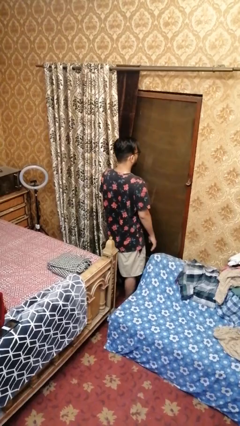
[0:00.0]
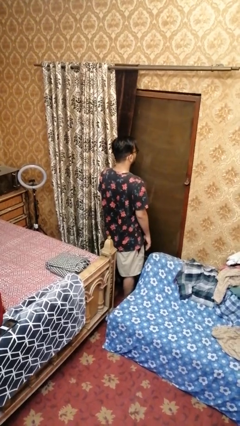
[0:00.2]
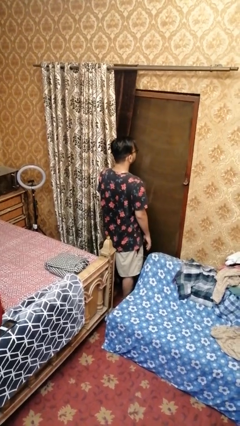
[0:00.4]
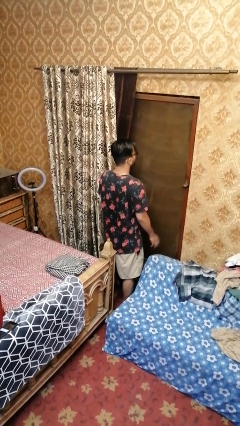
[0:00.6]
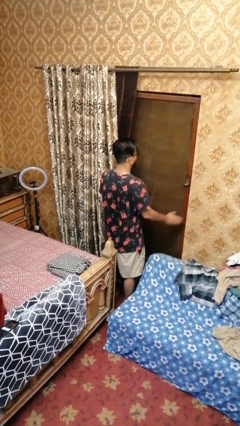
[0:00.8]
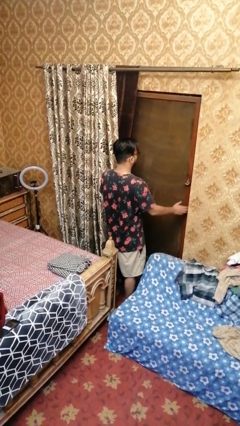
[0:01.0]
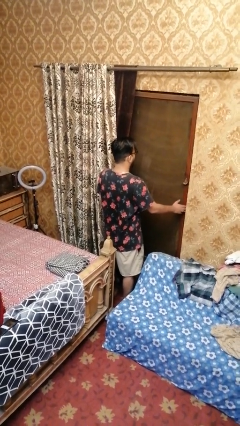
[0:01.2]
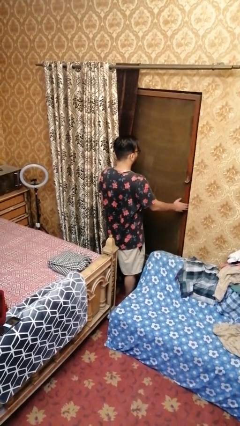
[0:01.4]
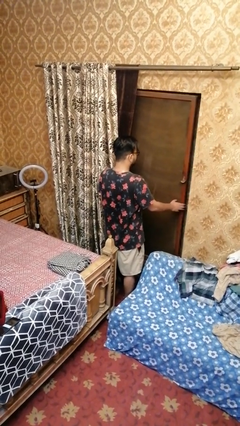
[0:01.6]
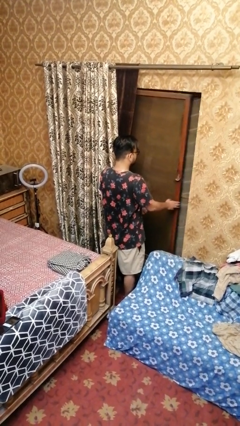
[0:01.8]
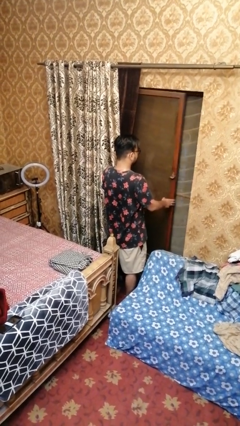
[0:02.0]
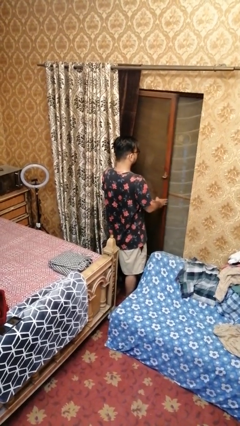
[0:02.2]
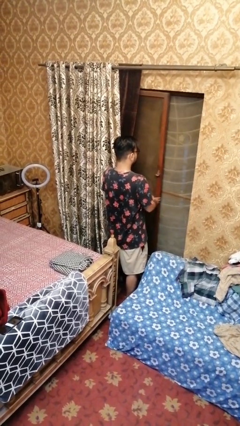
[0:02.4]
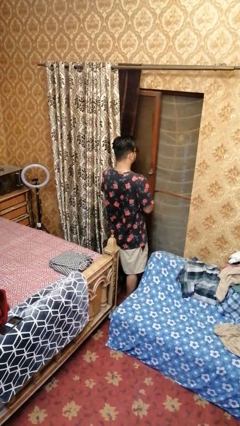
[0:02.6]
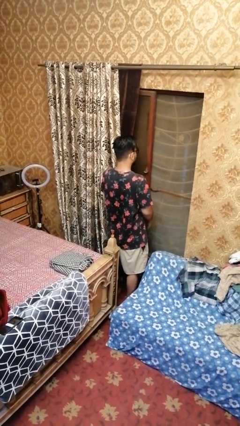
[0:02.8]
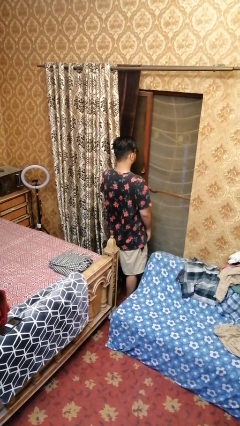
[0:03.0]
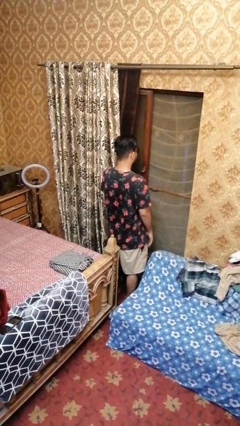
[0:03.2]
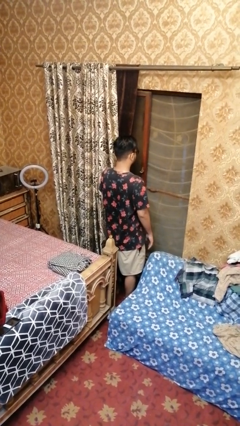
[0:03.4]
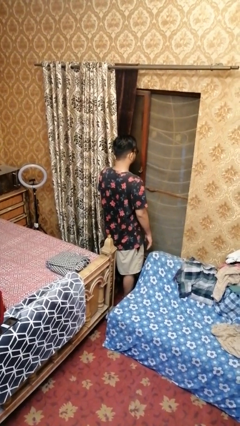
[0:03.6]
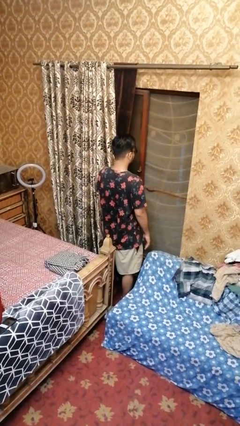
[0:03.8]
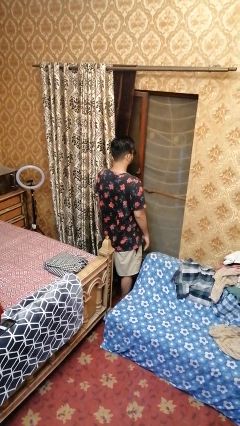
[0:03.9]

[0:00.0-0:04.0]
person opens home window

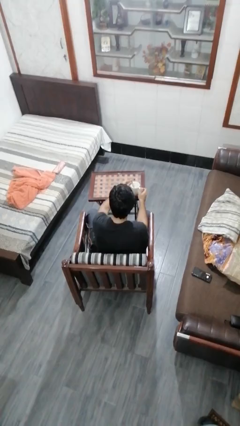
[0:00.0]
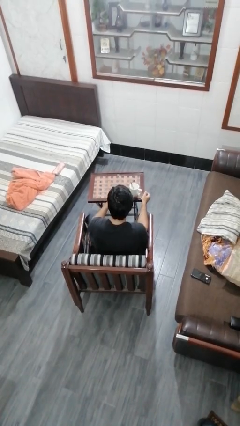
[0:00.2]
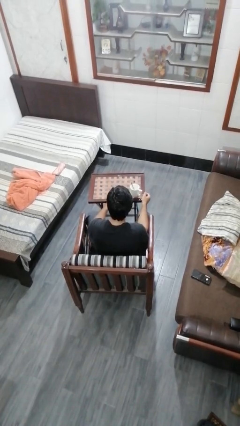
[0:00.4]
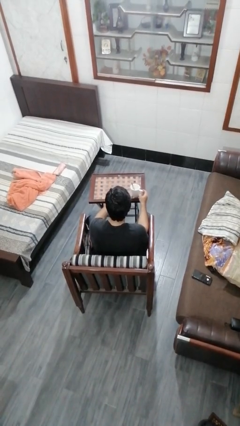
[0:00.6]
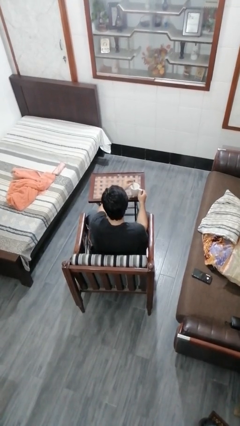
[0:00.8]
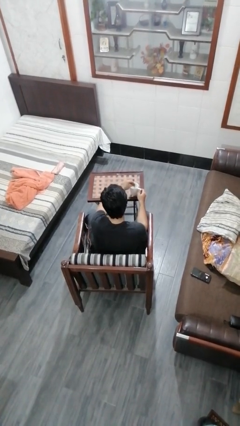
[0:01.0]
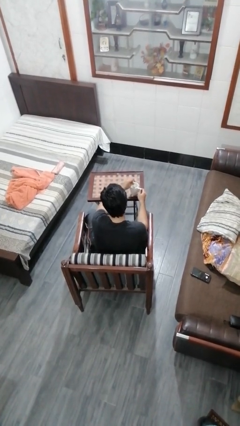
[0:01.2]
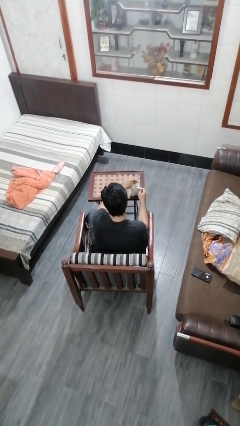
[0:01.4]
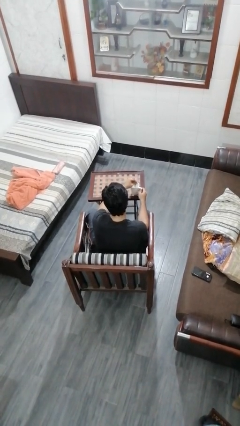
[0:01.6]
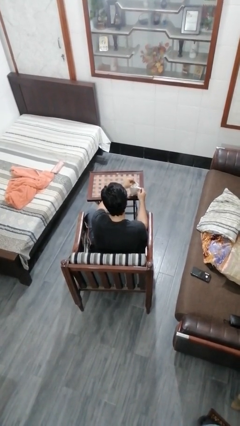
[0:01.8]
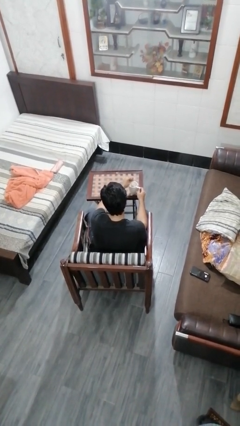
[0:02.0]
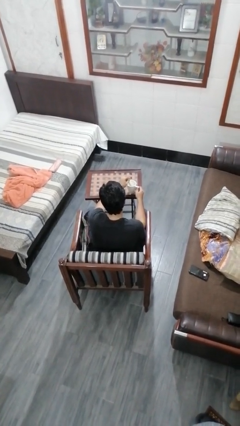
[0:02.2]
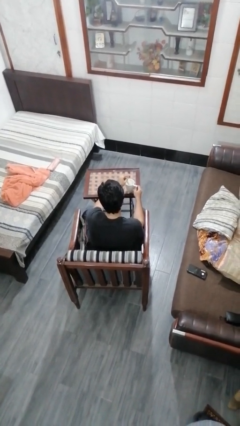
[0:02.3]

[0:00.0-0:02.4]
person stirs mug

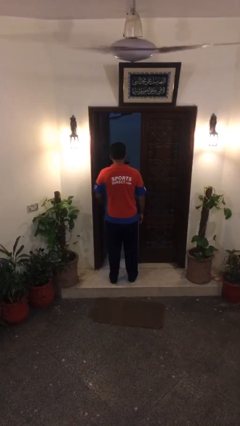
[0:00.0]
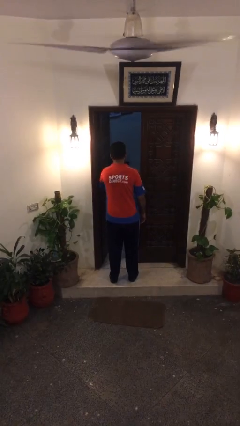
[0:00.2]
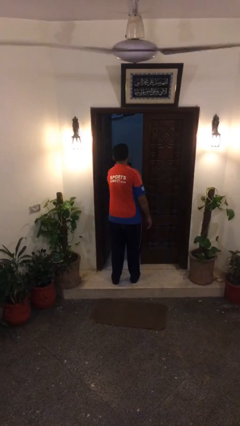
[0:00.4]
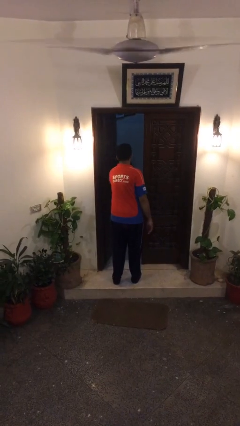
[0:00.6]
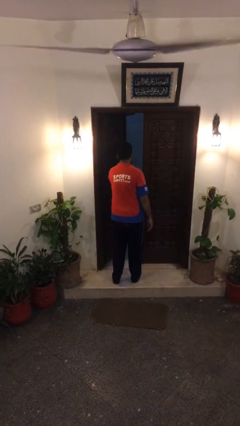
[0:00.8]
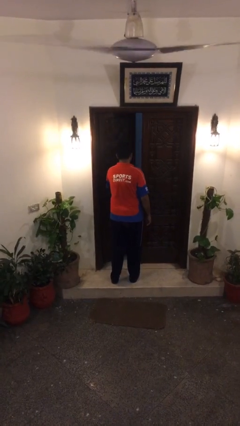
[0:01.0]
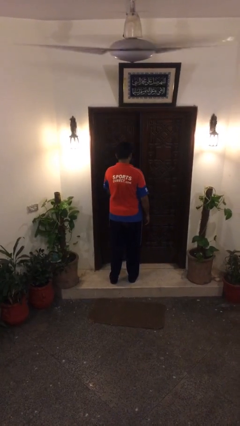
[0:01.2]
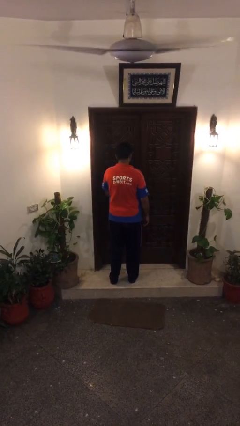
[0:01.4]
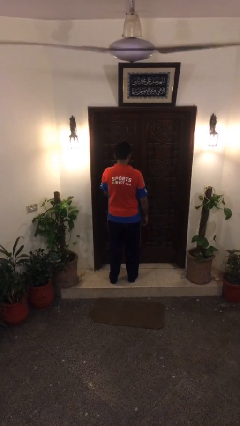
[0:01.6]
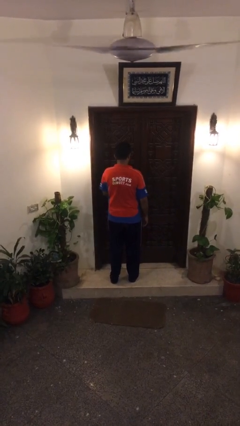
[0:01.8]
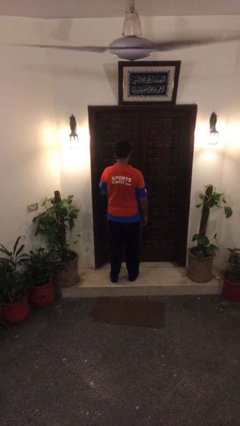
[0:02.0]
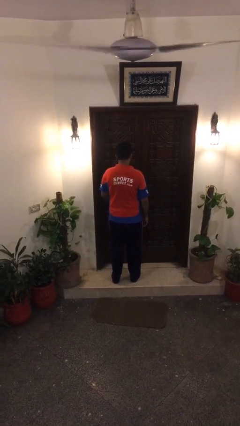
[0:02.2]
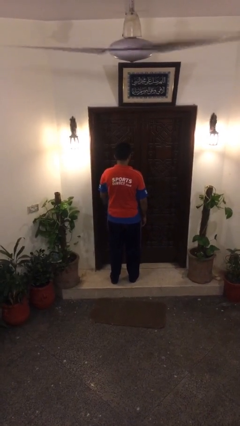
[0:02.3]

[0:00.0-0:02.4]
person closes facility door

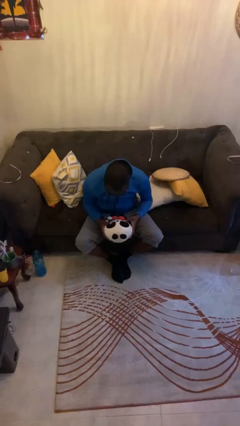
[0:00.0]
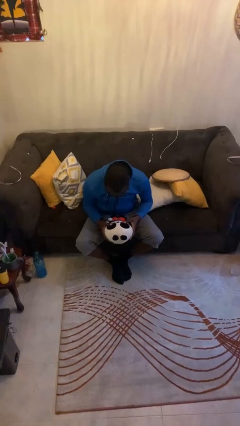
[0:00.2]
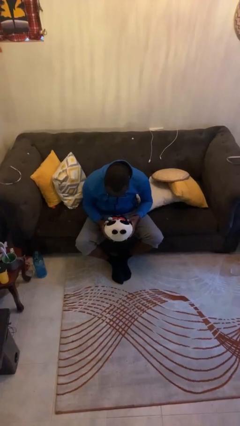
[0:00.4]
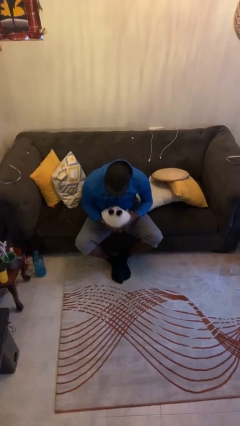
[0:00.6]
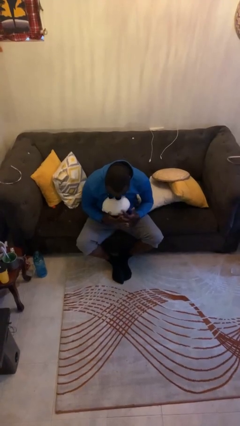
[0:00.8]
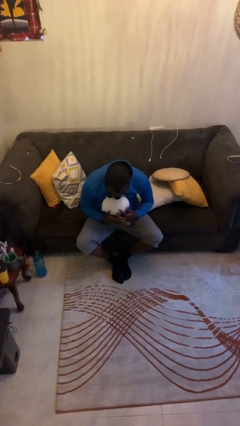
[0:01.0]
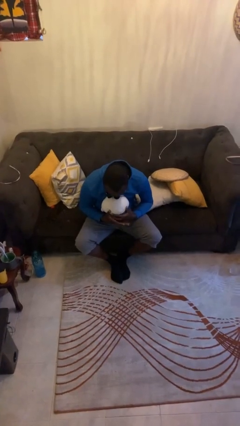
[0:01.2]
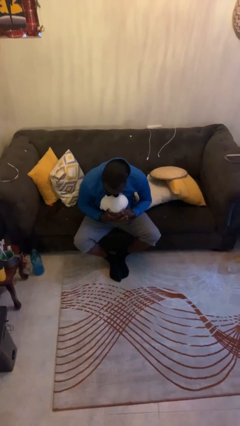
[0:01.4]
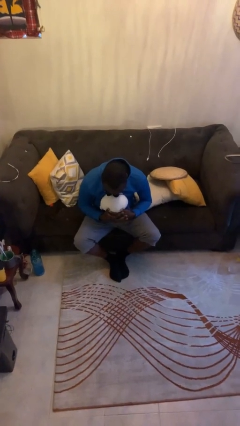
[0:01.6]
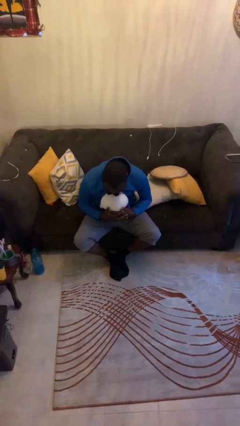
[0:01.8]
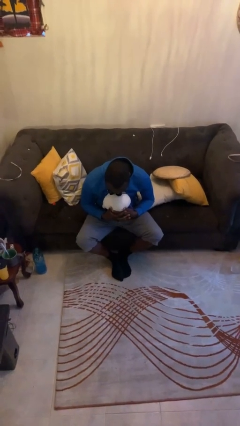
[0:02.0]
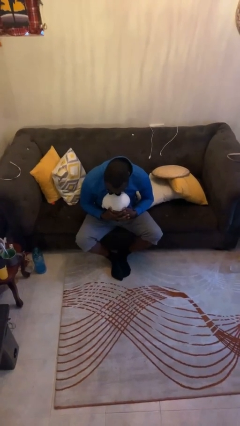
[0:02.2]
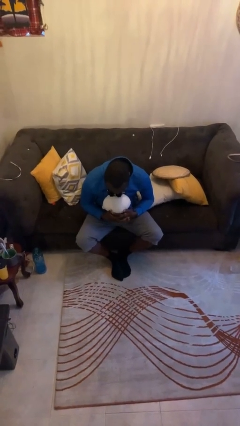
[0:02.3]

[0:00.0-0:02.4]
person hugs stuffed animal

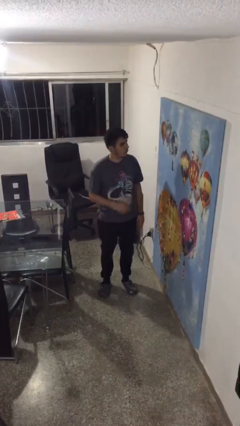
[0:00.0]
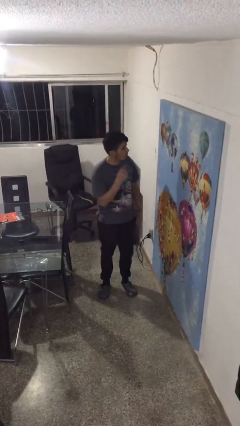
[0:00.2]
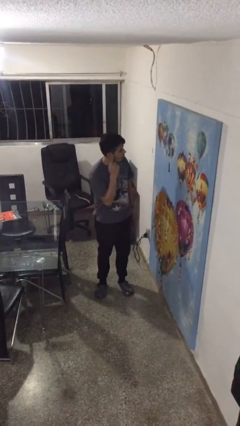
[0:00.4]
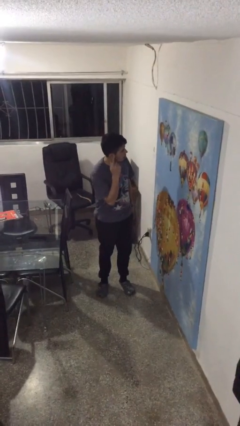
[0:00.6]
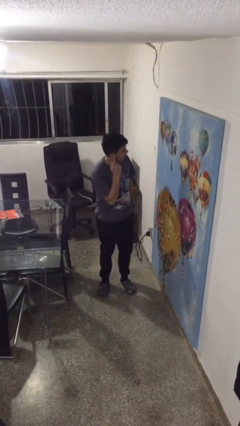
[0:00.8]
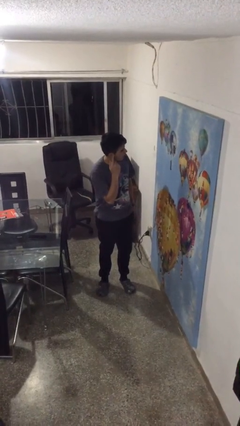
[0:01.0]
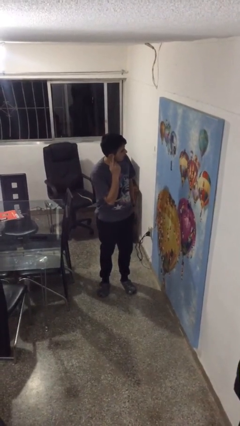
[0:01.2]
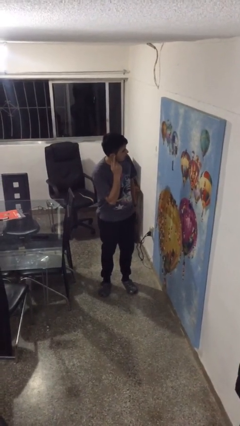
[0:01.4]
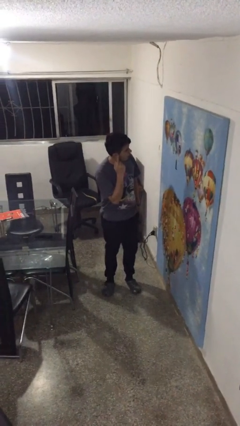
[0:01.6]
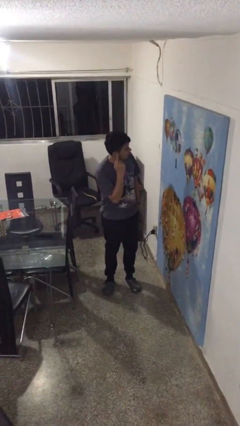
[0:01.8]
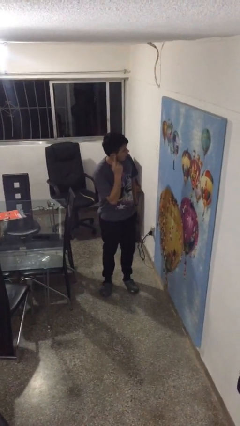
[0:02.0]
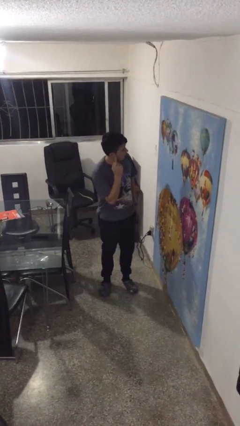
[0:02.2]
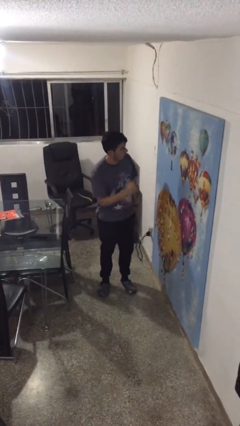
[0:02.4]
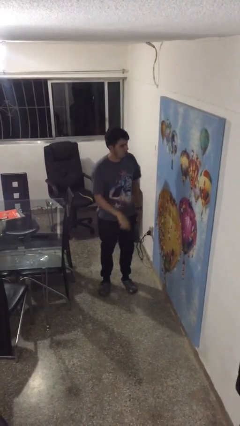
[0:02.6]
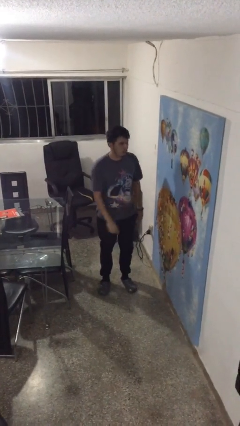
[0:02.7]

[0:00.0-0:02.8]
person gestures listen closely

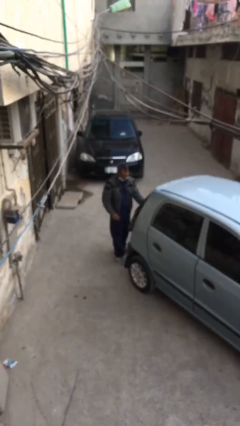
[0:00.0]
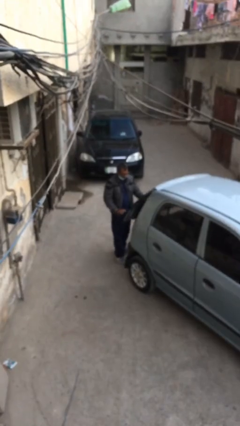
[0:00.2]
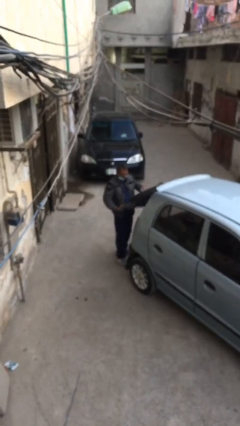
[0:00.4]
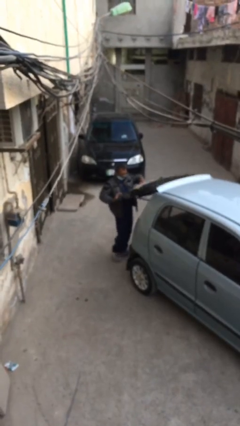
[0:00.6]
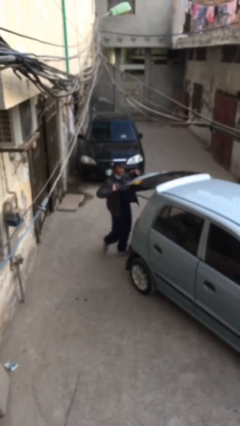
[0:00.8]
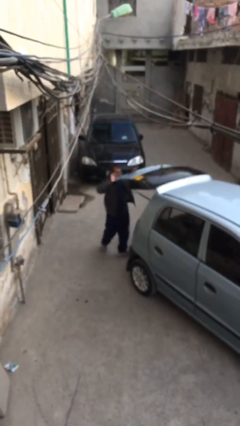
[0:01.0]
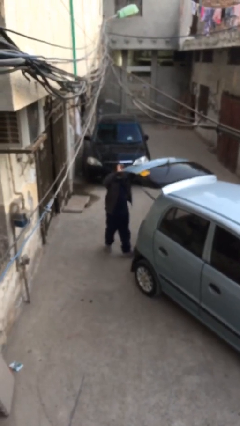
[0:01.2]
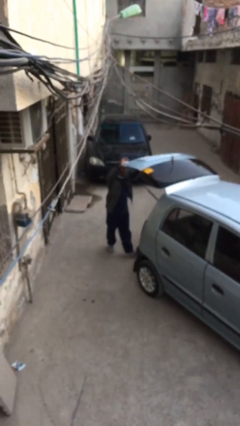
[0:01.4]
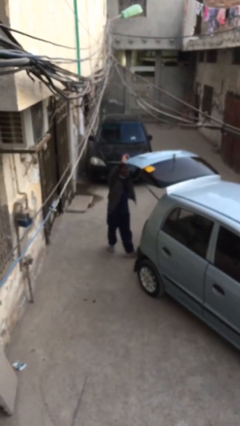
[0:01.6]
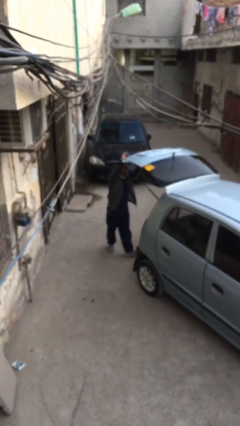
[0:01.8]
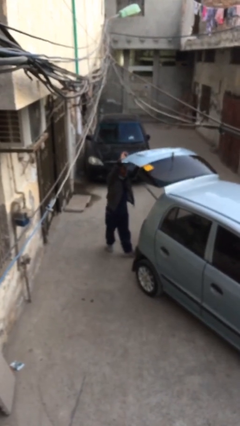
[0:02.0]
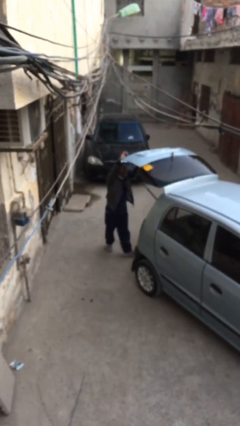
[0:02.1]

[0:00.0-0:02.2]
person opens car trunk

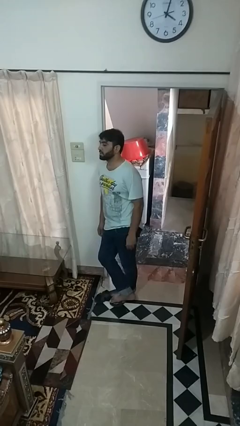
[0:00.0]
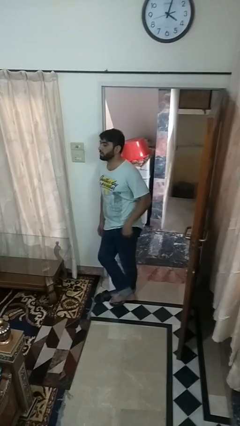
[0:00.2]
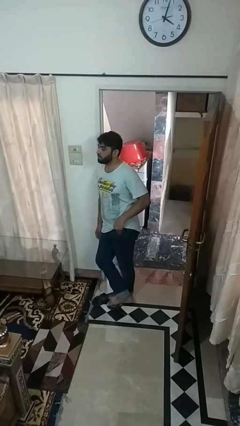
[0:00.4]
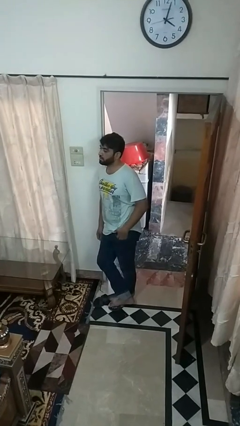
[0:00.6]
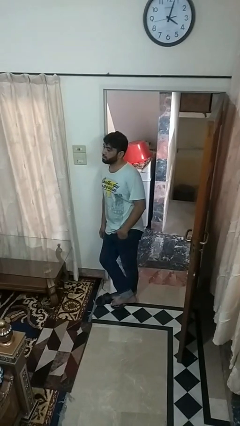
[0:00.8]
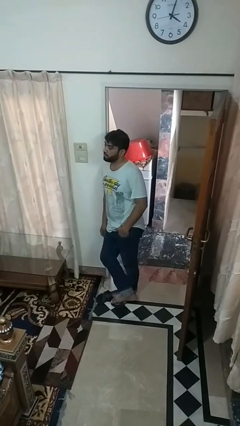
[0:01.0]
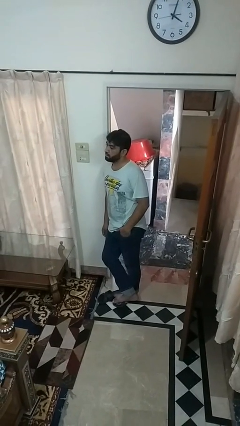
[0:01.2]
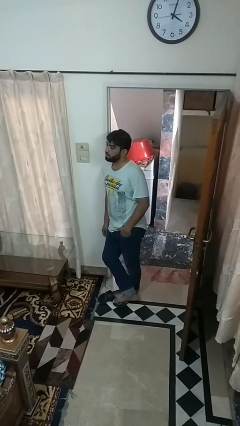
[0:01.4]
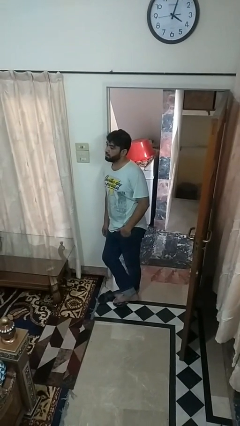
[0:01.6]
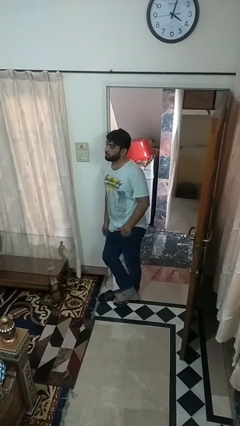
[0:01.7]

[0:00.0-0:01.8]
person puts hands in back pockets
